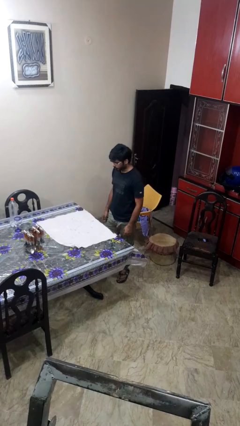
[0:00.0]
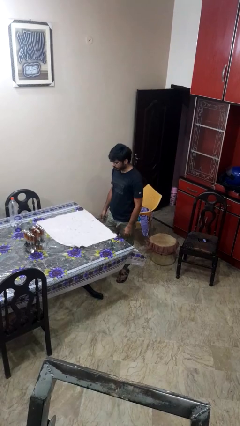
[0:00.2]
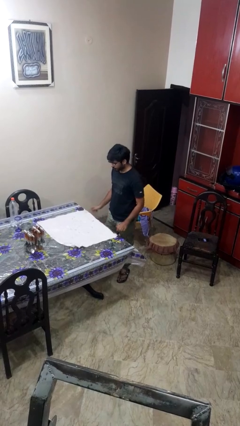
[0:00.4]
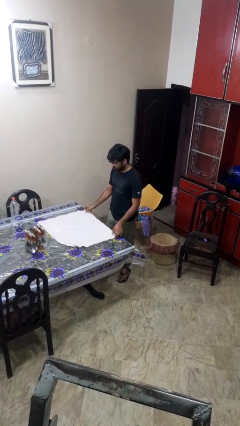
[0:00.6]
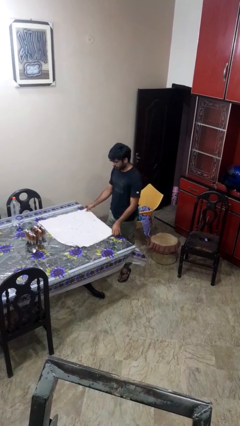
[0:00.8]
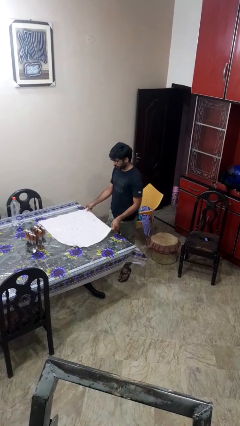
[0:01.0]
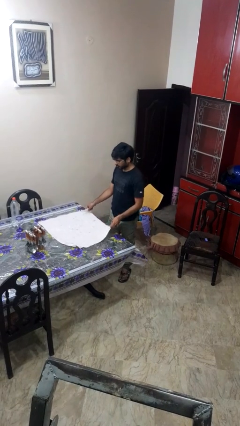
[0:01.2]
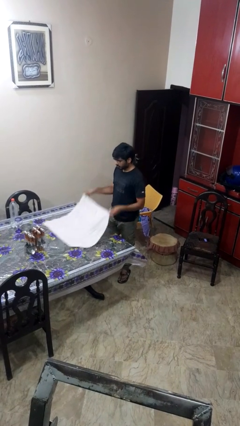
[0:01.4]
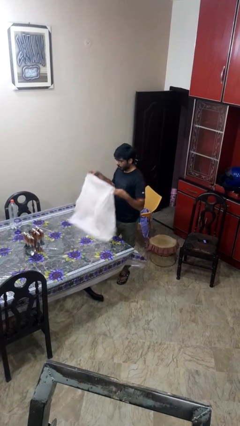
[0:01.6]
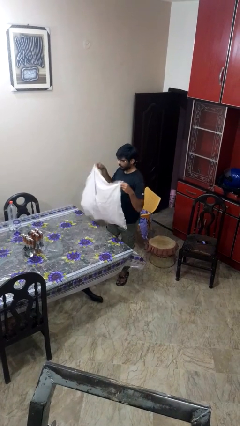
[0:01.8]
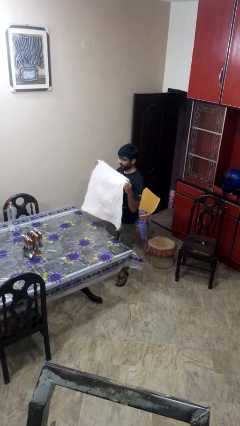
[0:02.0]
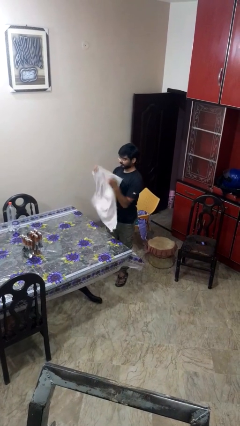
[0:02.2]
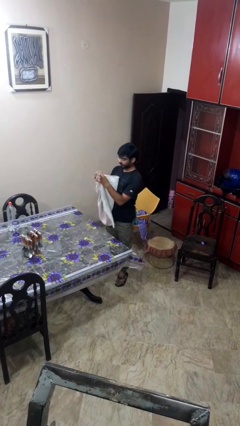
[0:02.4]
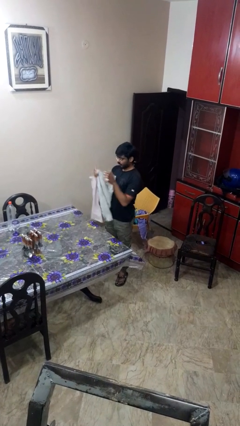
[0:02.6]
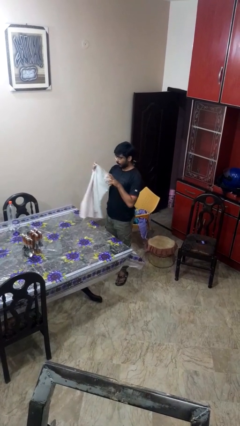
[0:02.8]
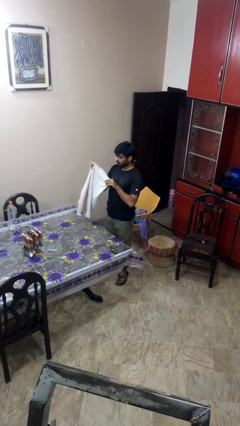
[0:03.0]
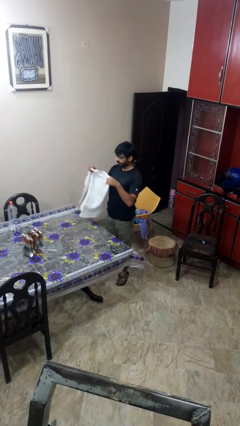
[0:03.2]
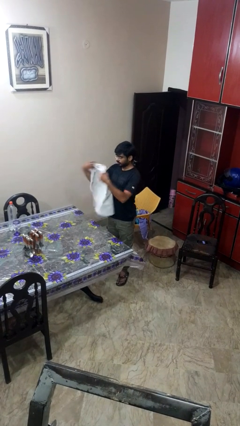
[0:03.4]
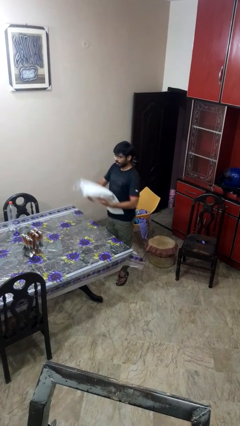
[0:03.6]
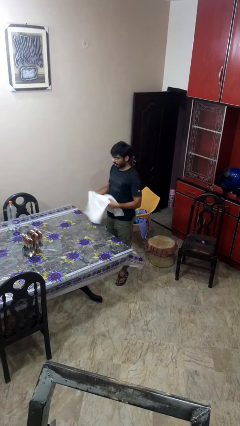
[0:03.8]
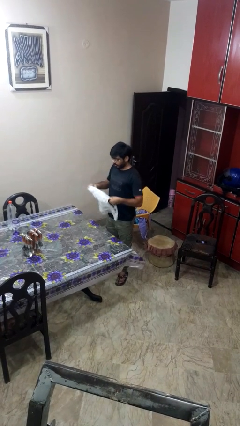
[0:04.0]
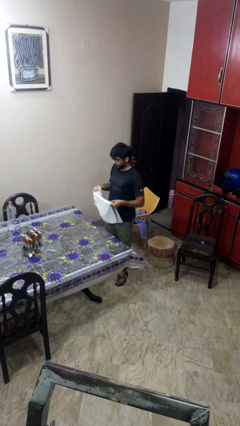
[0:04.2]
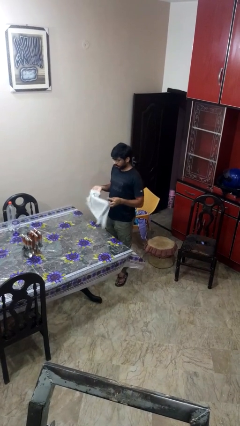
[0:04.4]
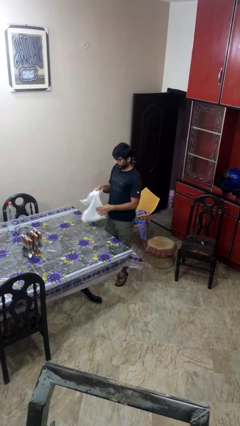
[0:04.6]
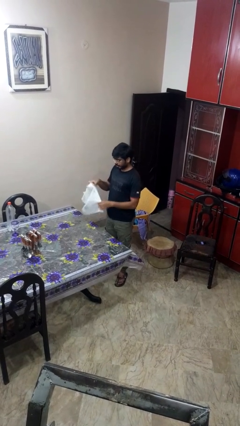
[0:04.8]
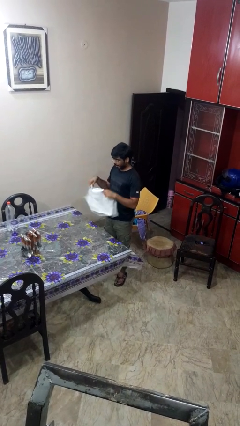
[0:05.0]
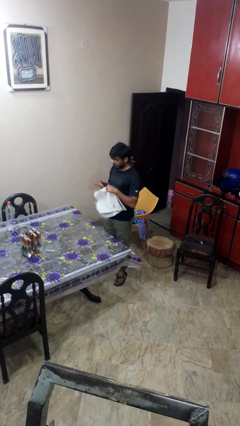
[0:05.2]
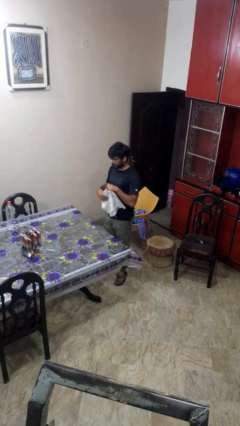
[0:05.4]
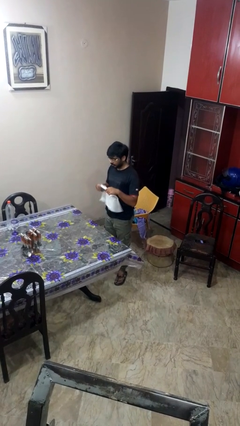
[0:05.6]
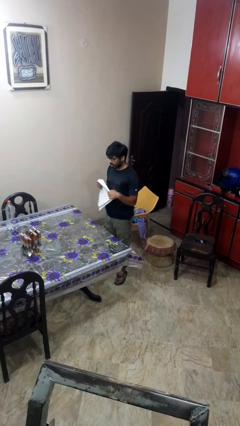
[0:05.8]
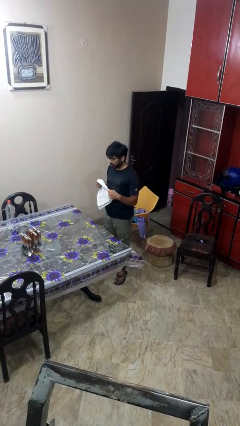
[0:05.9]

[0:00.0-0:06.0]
person folds tablecloth

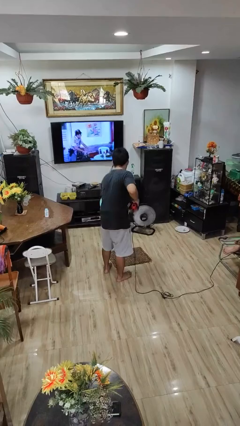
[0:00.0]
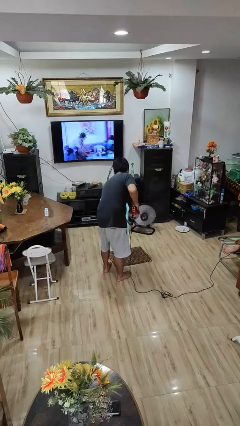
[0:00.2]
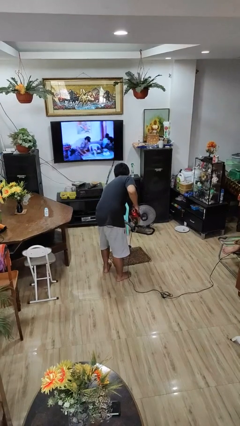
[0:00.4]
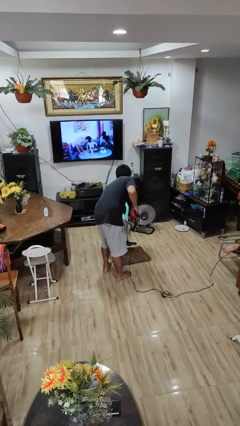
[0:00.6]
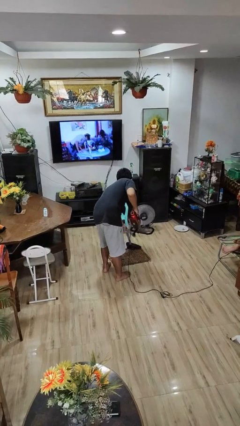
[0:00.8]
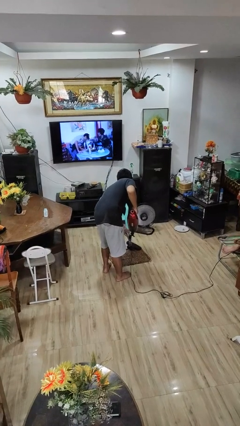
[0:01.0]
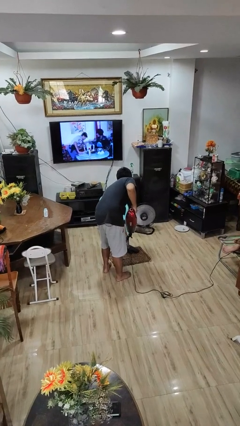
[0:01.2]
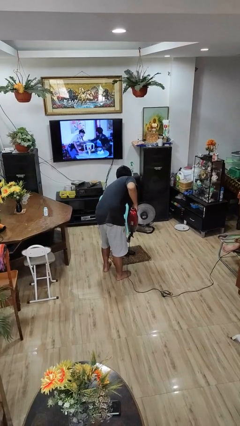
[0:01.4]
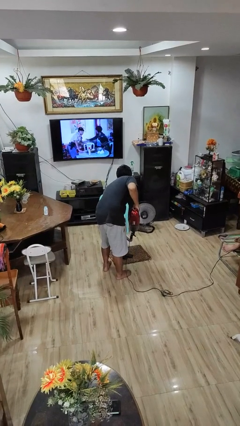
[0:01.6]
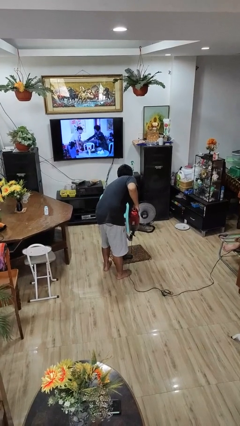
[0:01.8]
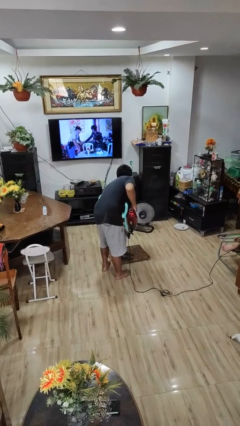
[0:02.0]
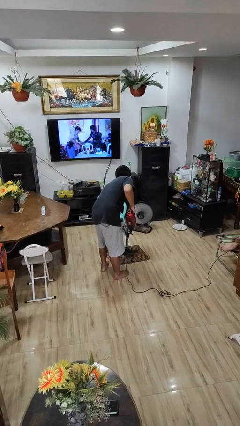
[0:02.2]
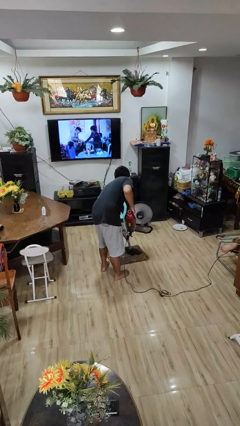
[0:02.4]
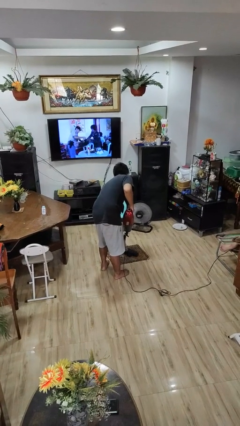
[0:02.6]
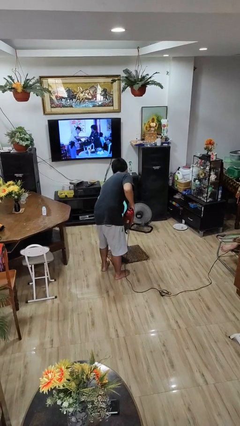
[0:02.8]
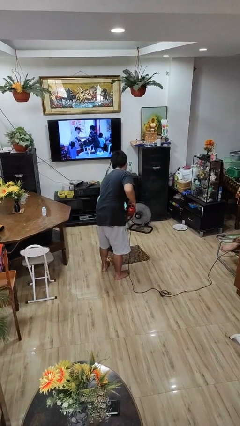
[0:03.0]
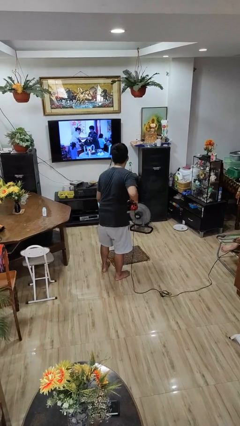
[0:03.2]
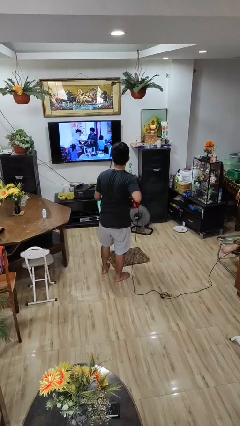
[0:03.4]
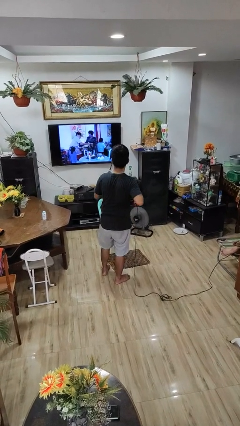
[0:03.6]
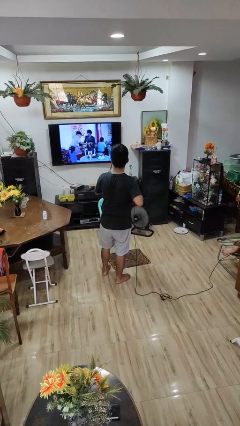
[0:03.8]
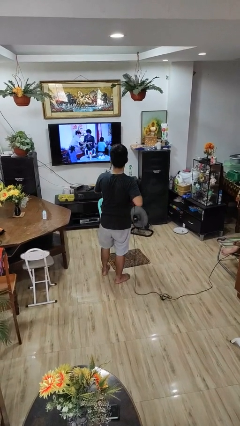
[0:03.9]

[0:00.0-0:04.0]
person vacuums carpet

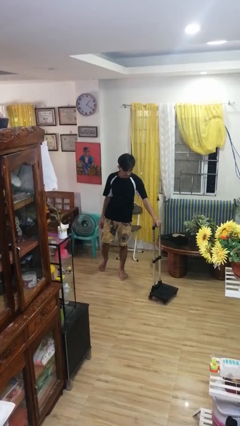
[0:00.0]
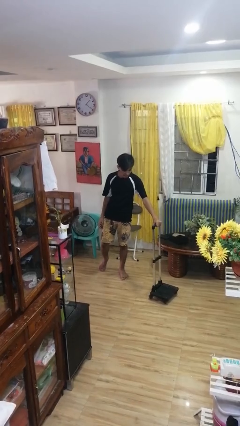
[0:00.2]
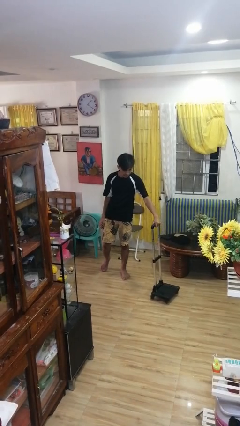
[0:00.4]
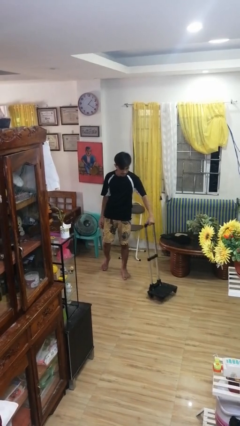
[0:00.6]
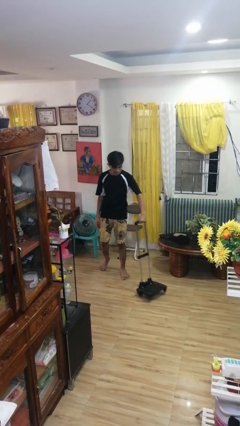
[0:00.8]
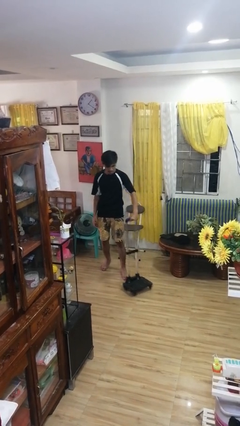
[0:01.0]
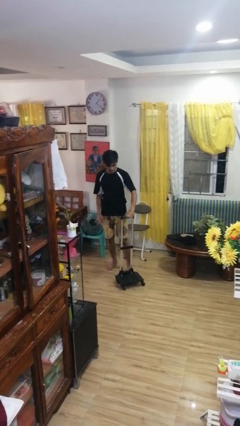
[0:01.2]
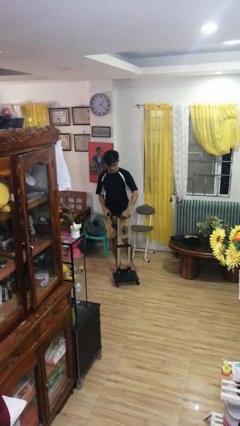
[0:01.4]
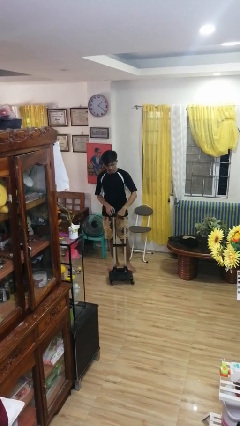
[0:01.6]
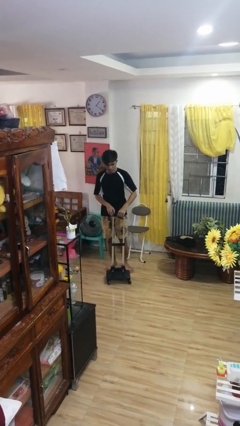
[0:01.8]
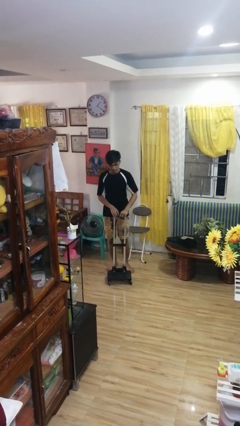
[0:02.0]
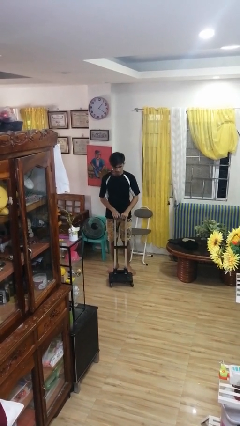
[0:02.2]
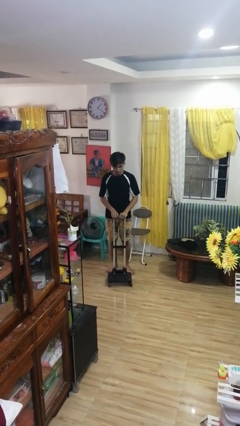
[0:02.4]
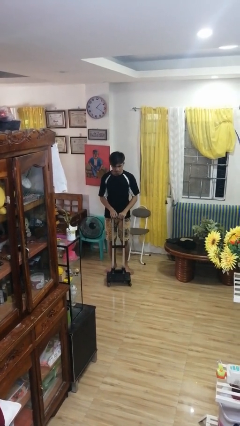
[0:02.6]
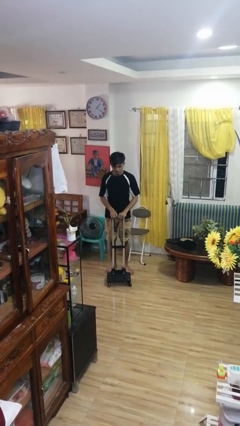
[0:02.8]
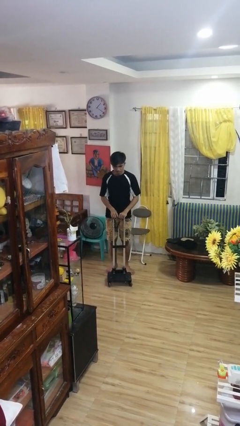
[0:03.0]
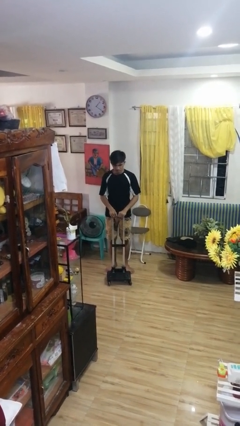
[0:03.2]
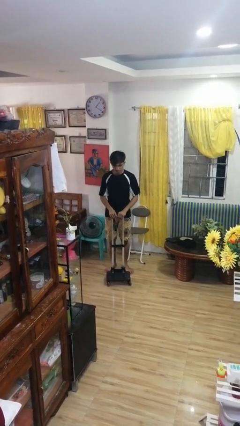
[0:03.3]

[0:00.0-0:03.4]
person pulls wheeled cart

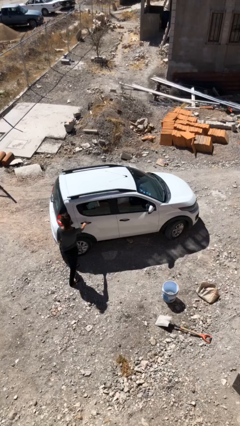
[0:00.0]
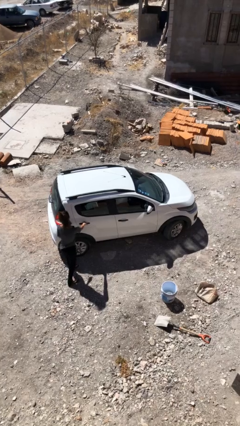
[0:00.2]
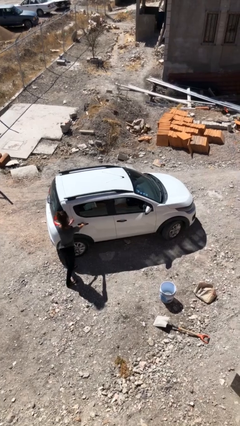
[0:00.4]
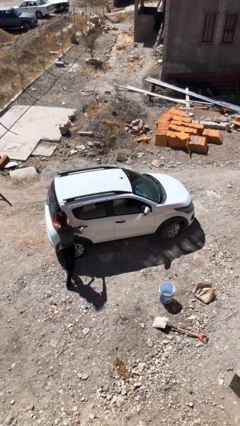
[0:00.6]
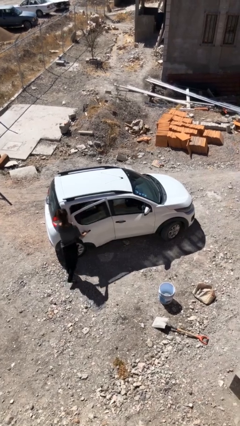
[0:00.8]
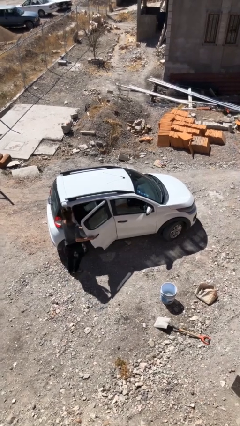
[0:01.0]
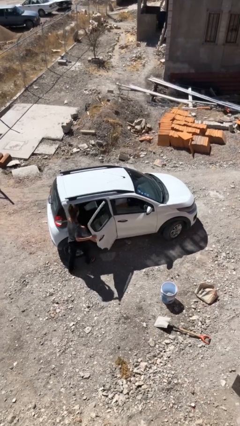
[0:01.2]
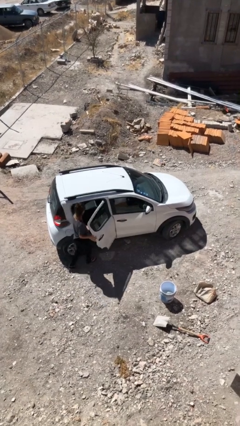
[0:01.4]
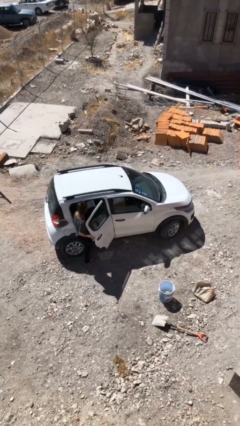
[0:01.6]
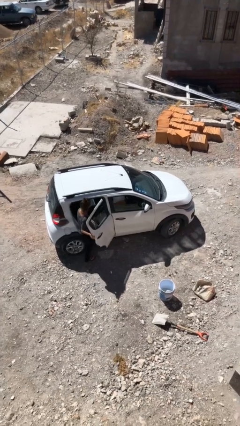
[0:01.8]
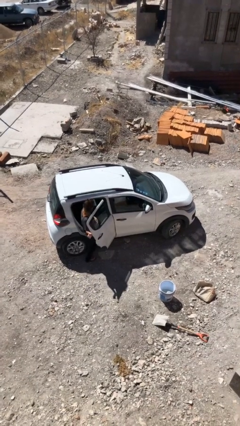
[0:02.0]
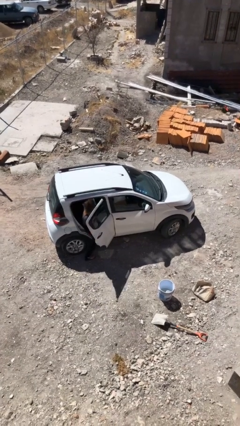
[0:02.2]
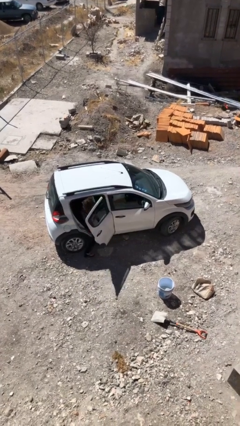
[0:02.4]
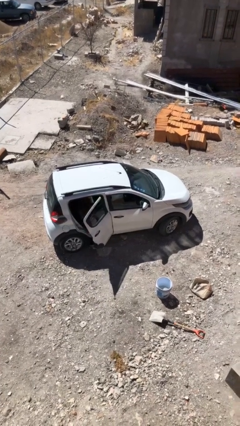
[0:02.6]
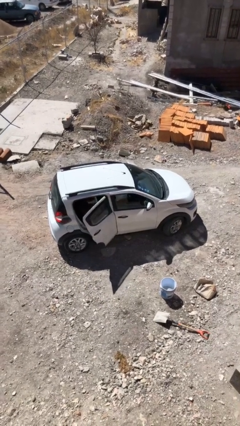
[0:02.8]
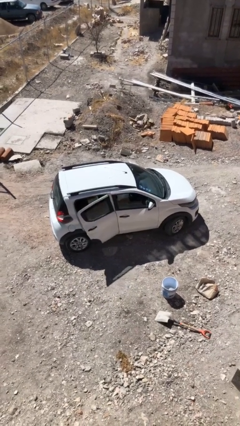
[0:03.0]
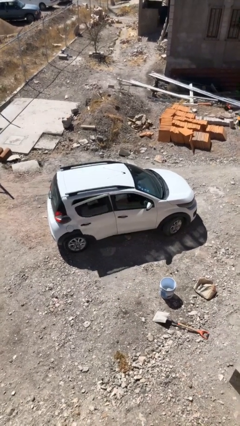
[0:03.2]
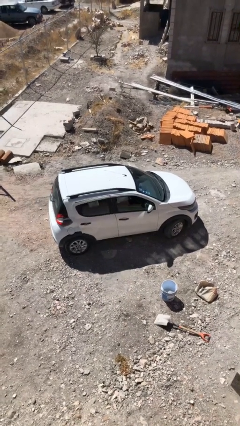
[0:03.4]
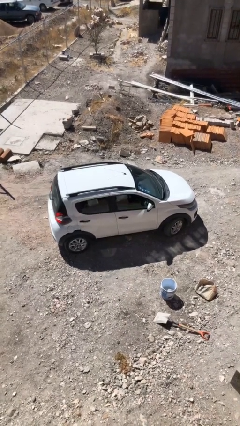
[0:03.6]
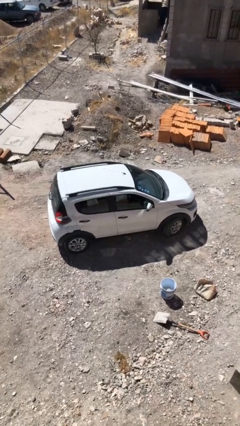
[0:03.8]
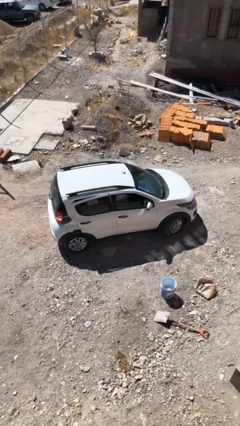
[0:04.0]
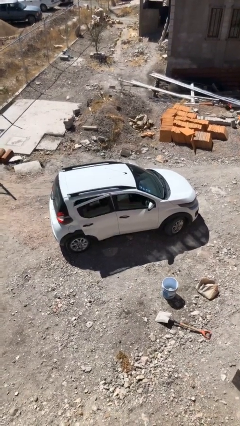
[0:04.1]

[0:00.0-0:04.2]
car picks up person
